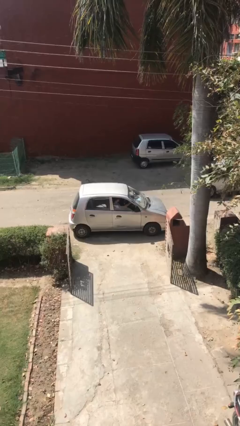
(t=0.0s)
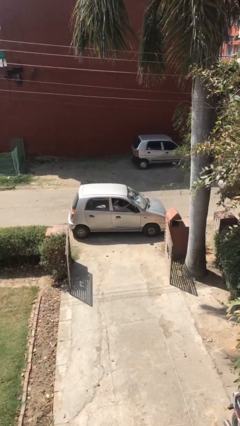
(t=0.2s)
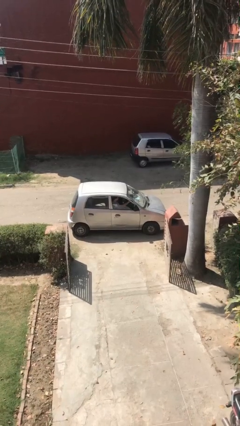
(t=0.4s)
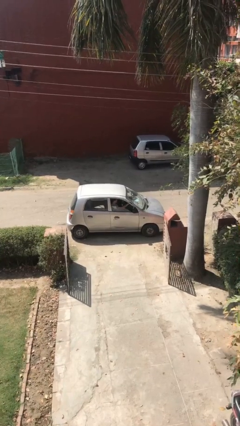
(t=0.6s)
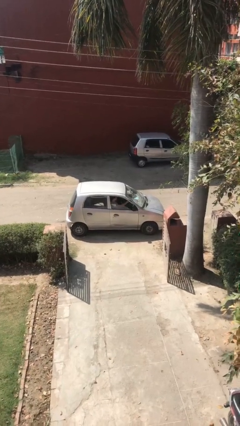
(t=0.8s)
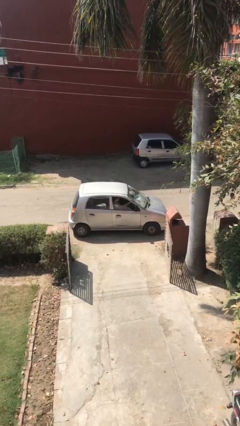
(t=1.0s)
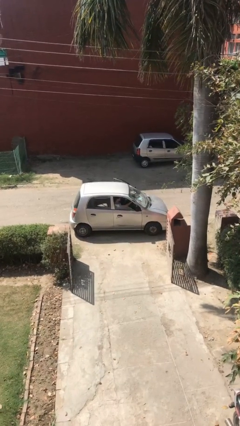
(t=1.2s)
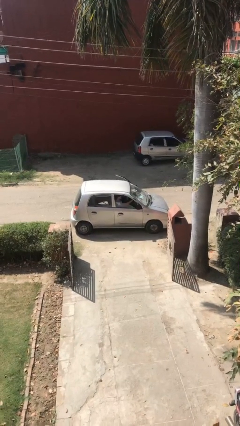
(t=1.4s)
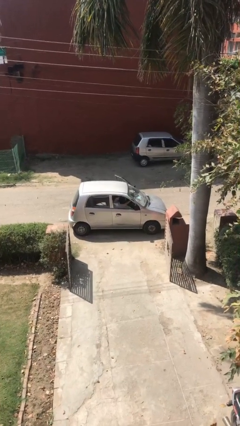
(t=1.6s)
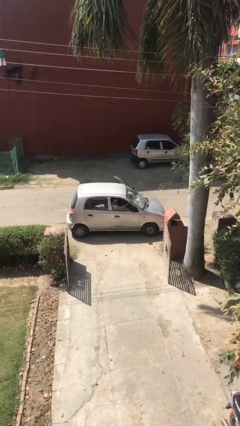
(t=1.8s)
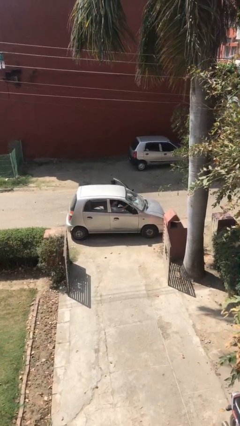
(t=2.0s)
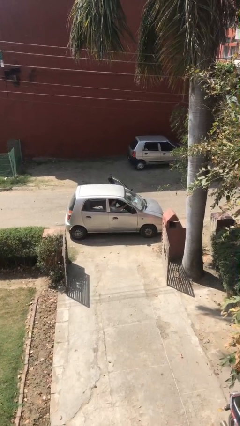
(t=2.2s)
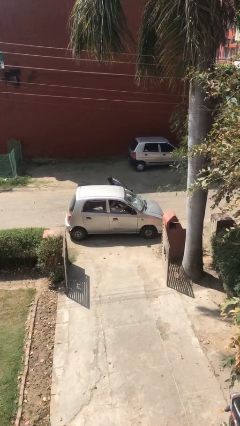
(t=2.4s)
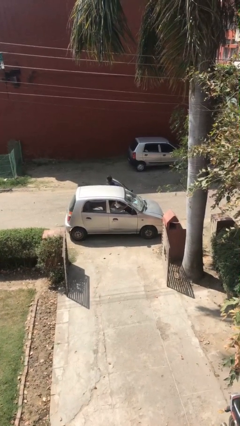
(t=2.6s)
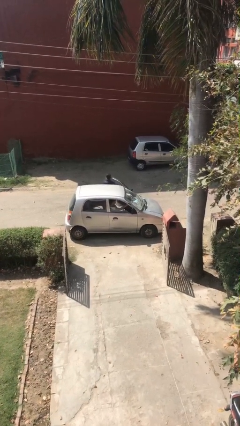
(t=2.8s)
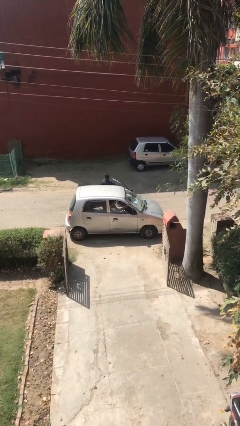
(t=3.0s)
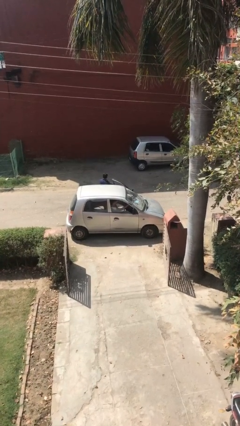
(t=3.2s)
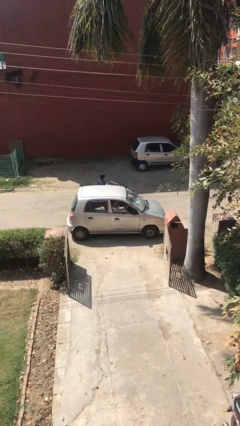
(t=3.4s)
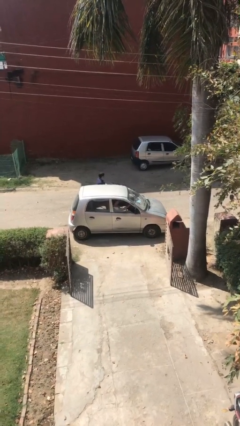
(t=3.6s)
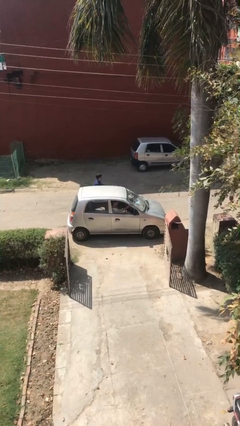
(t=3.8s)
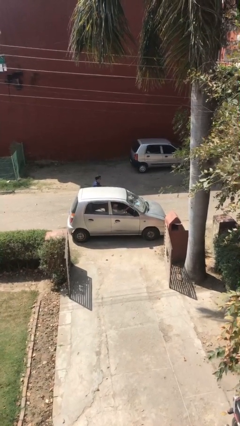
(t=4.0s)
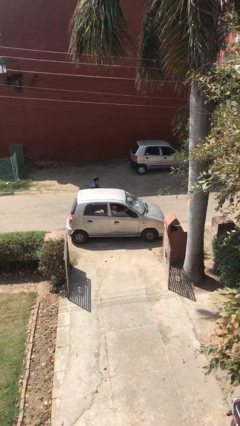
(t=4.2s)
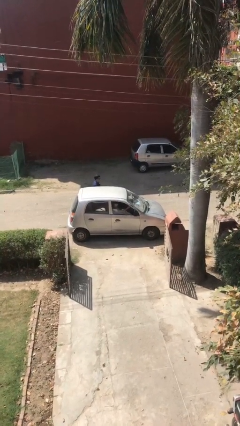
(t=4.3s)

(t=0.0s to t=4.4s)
car drops off person

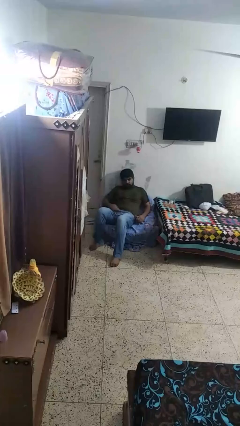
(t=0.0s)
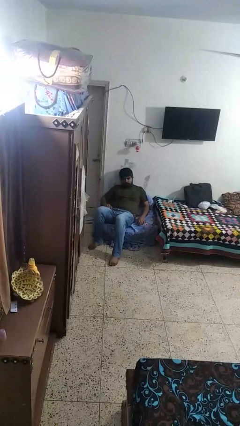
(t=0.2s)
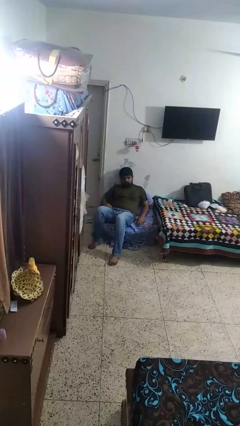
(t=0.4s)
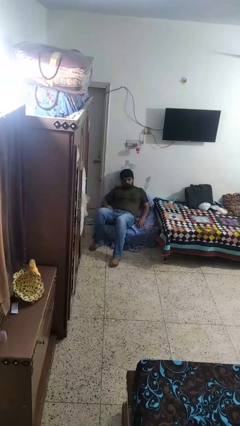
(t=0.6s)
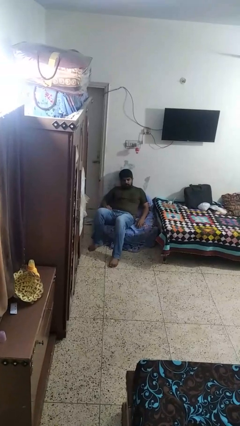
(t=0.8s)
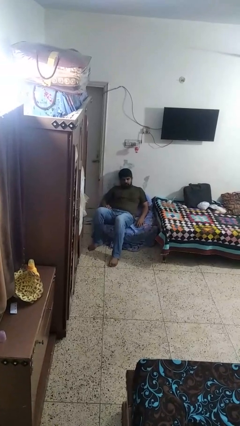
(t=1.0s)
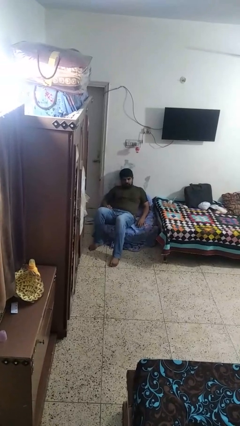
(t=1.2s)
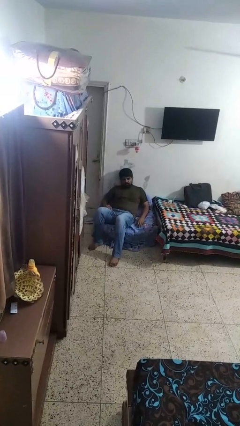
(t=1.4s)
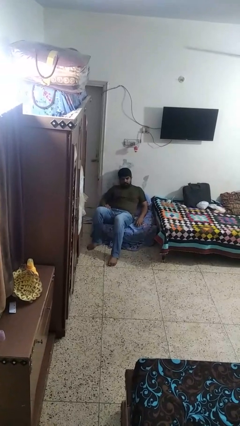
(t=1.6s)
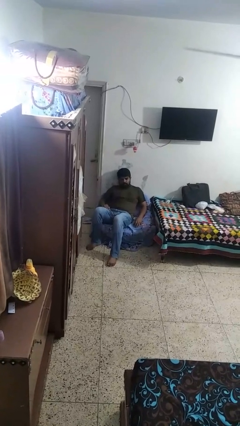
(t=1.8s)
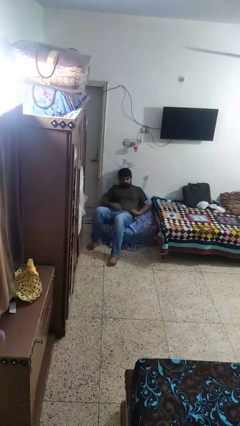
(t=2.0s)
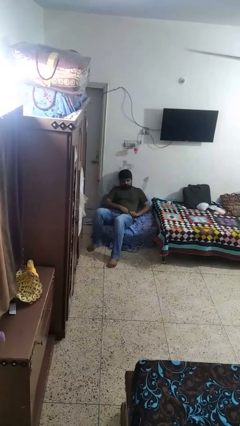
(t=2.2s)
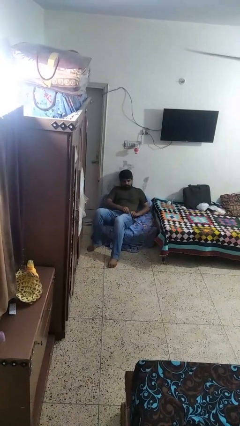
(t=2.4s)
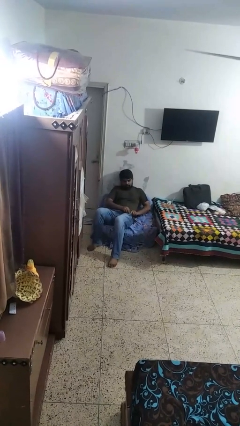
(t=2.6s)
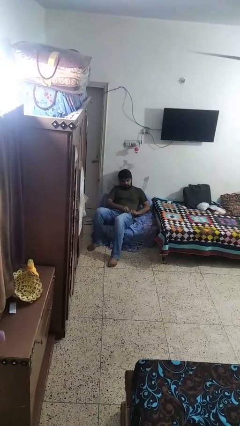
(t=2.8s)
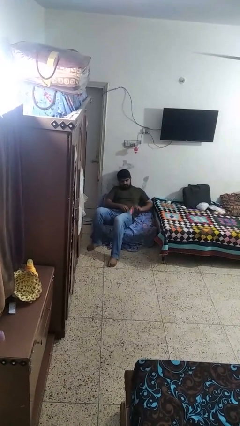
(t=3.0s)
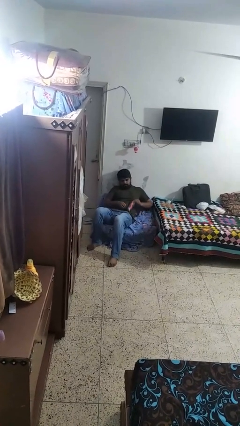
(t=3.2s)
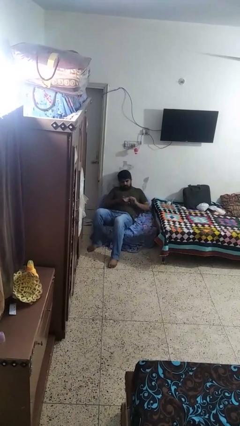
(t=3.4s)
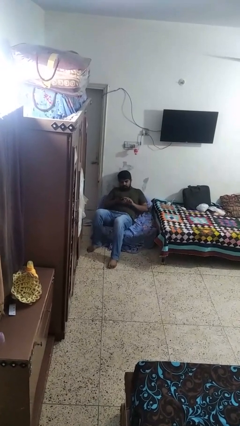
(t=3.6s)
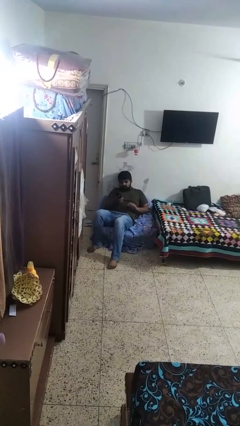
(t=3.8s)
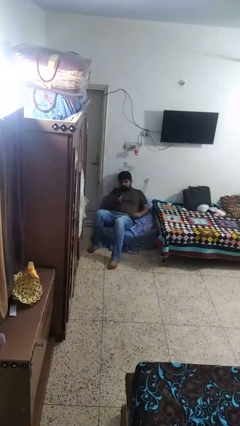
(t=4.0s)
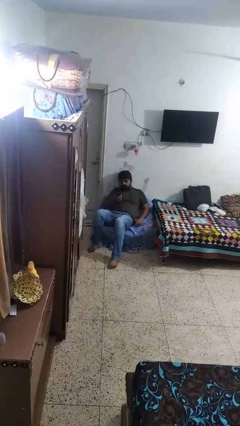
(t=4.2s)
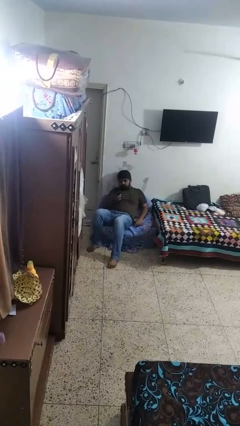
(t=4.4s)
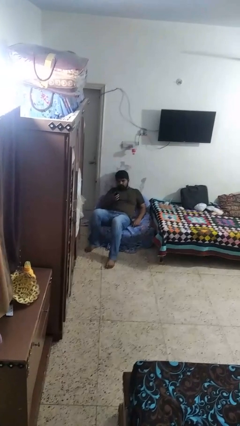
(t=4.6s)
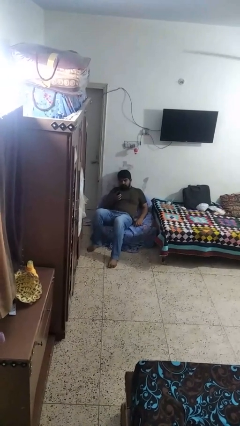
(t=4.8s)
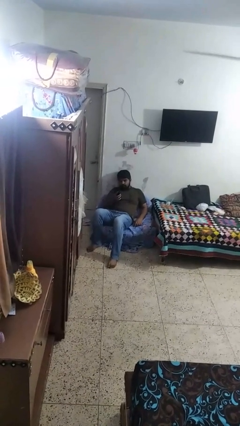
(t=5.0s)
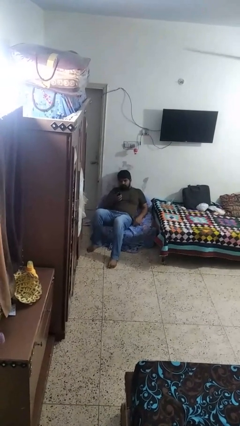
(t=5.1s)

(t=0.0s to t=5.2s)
person takes phone from pocket

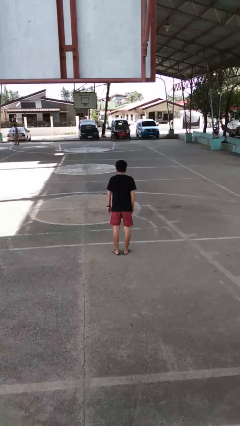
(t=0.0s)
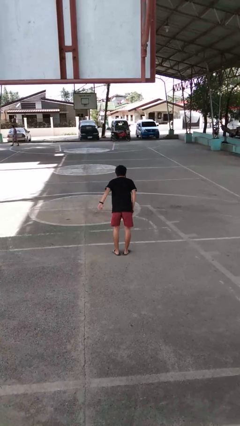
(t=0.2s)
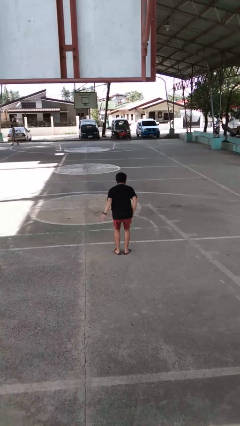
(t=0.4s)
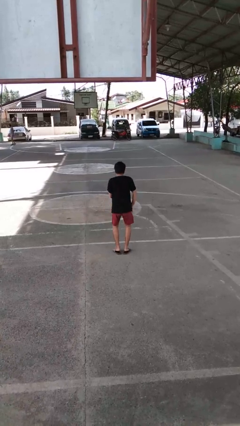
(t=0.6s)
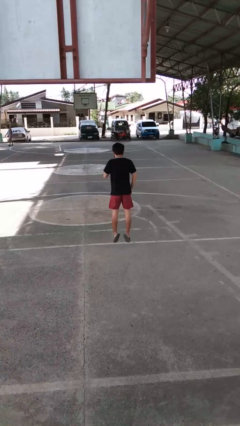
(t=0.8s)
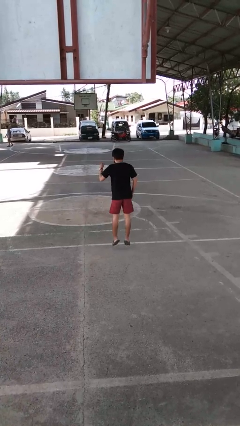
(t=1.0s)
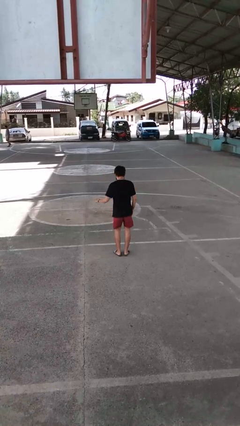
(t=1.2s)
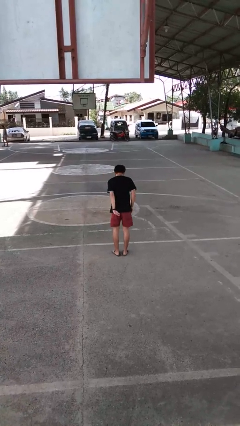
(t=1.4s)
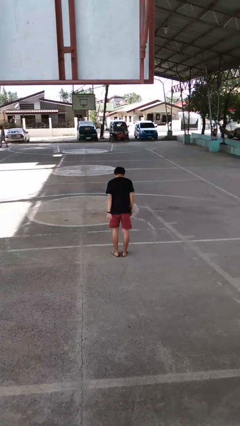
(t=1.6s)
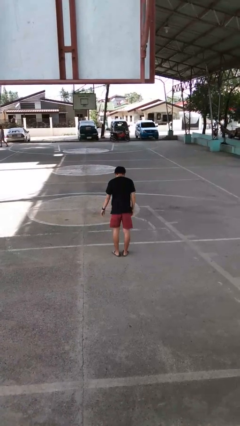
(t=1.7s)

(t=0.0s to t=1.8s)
person jumps

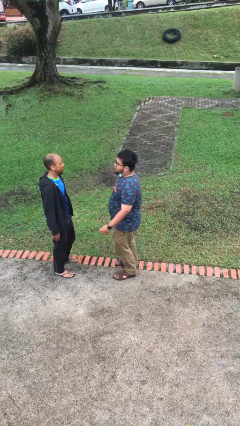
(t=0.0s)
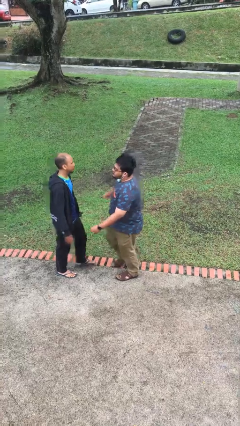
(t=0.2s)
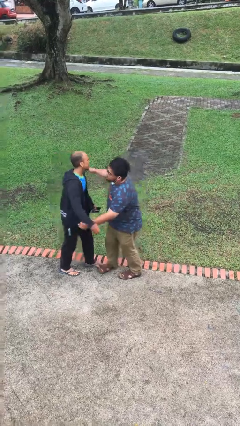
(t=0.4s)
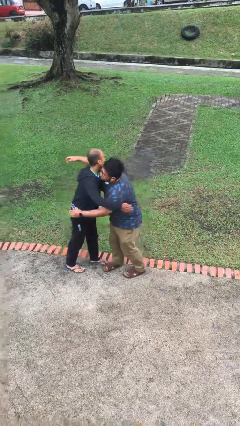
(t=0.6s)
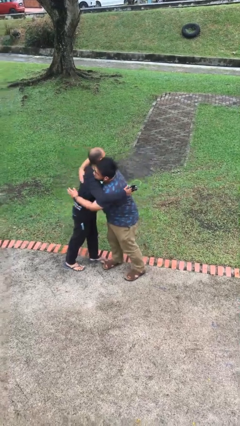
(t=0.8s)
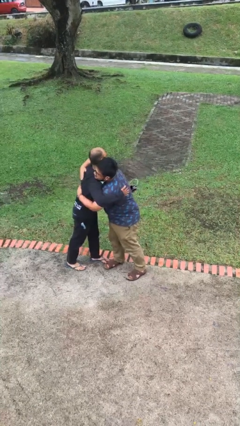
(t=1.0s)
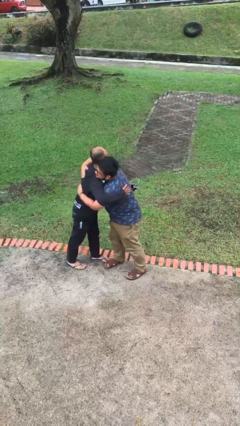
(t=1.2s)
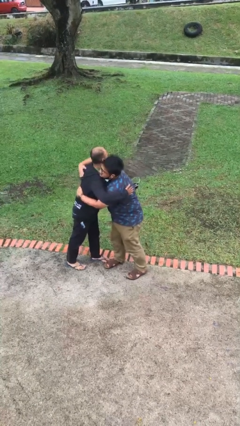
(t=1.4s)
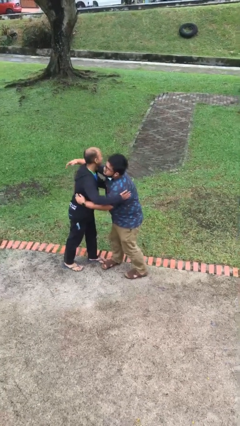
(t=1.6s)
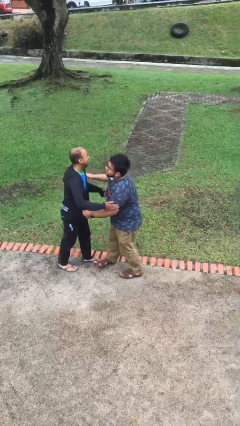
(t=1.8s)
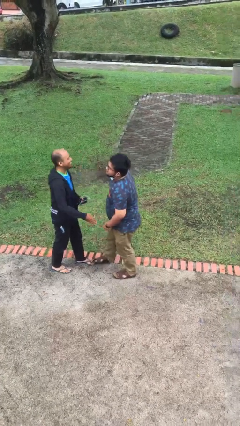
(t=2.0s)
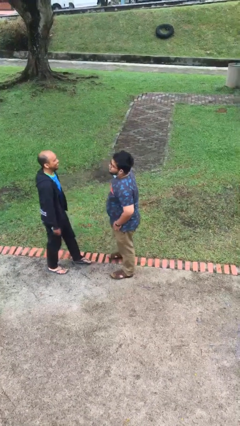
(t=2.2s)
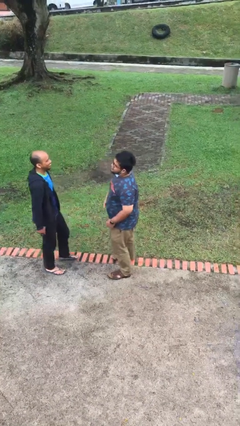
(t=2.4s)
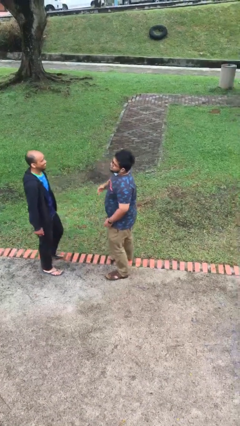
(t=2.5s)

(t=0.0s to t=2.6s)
person embraces person

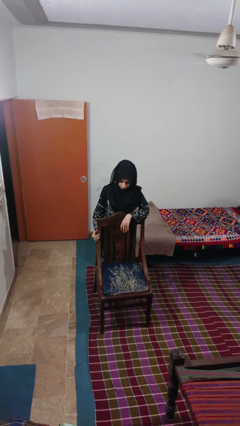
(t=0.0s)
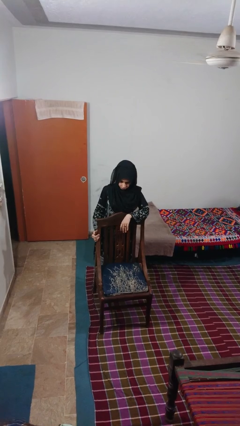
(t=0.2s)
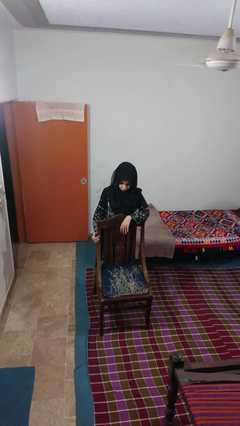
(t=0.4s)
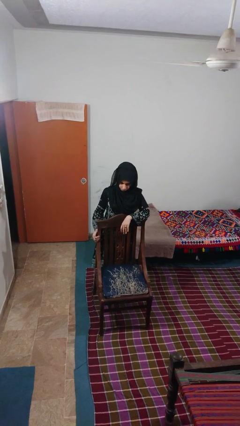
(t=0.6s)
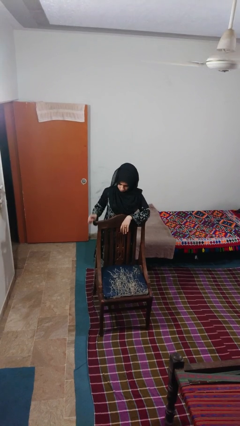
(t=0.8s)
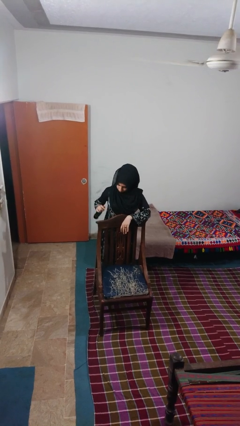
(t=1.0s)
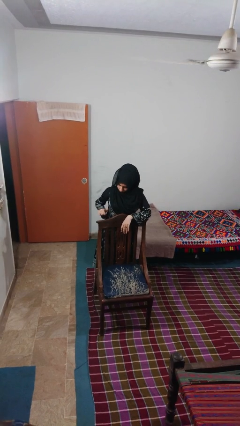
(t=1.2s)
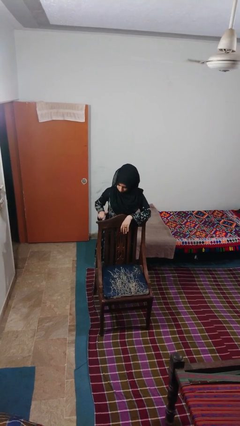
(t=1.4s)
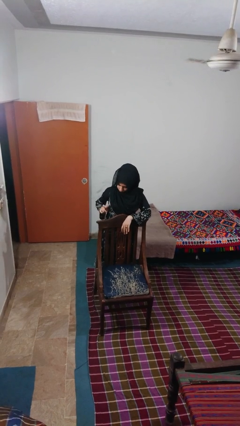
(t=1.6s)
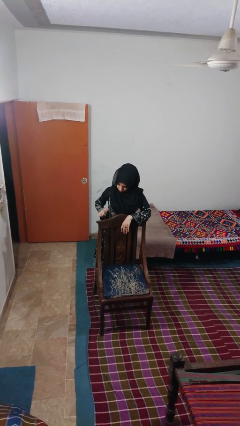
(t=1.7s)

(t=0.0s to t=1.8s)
person taps object with finger

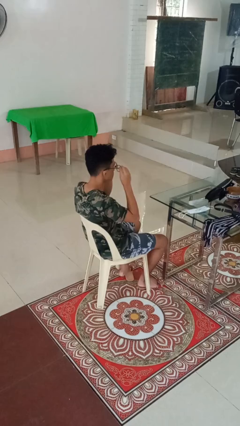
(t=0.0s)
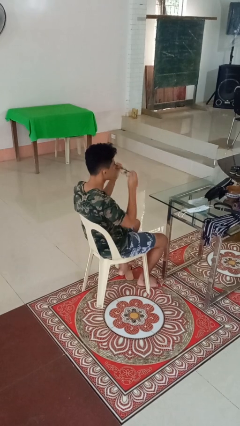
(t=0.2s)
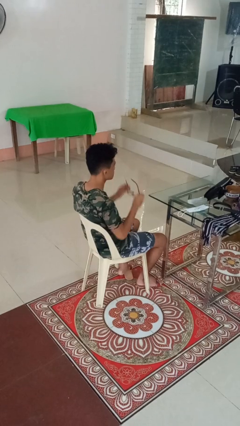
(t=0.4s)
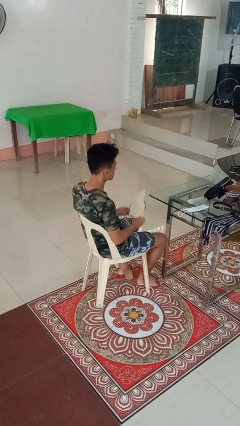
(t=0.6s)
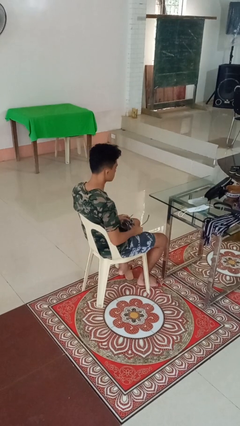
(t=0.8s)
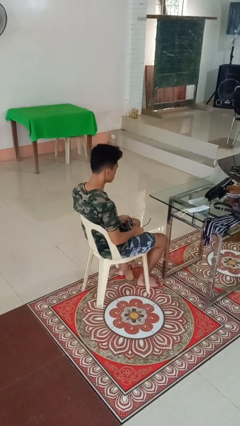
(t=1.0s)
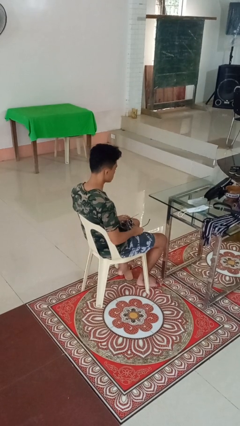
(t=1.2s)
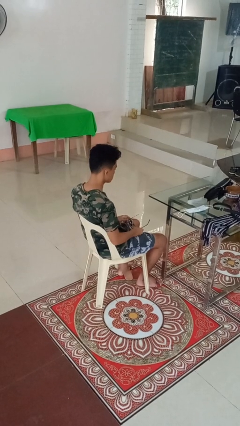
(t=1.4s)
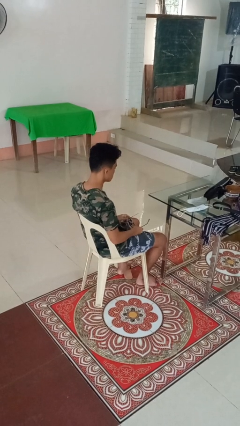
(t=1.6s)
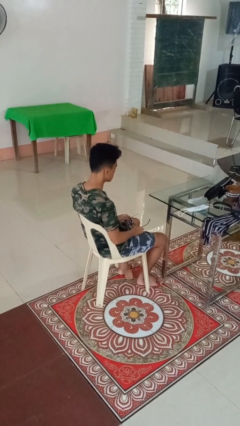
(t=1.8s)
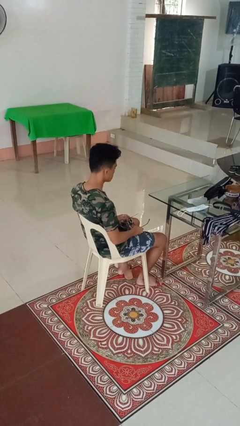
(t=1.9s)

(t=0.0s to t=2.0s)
person takes off glasses
